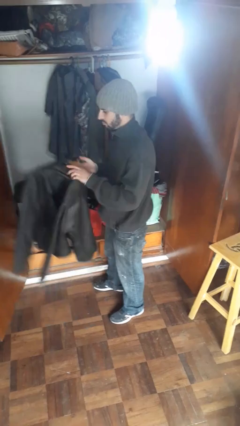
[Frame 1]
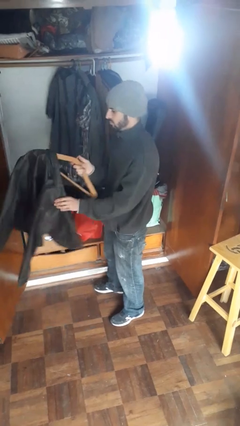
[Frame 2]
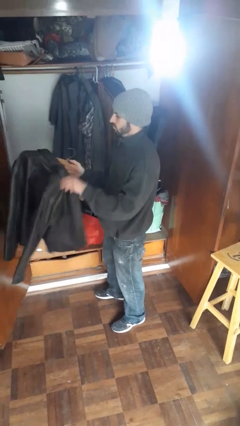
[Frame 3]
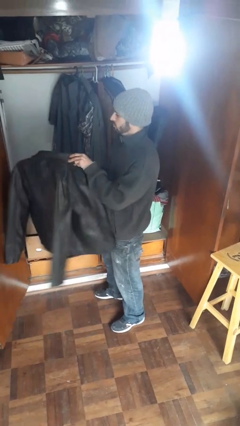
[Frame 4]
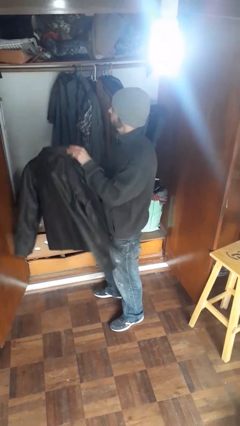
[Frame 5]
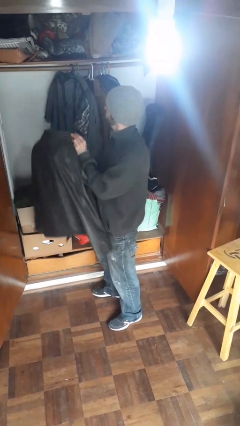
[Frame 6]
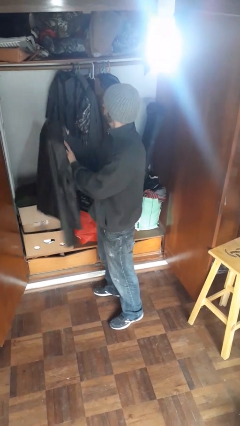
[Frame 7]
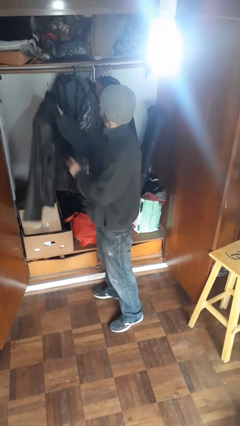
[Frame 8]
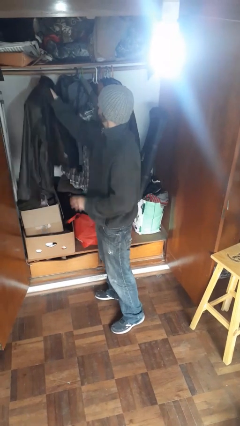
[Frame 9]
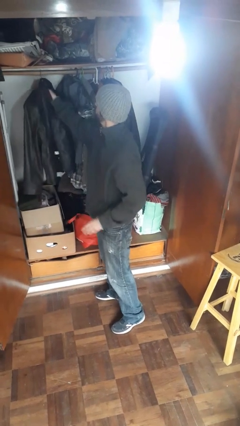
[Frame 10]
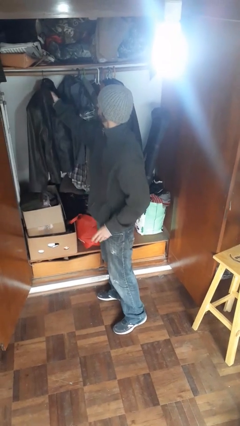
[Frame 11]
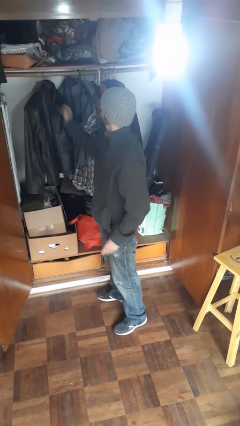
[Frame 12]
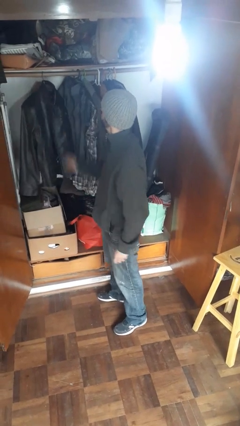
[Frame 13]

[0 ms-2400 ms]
person puts clothes into closet

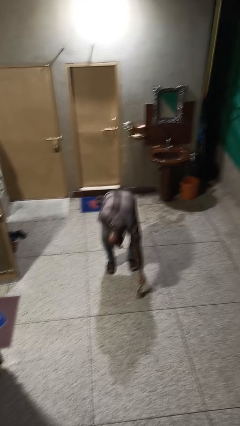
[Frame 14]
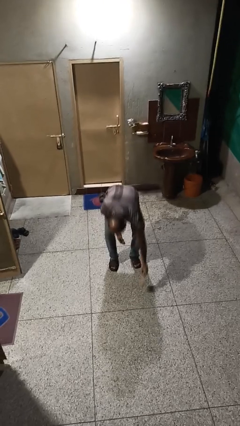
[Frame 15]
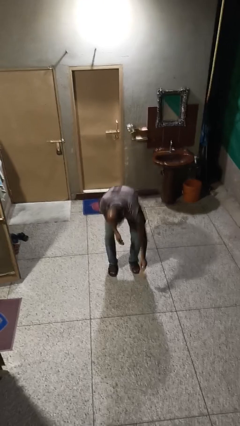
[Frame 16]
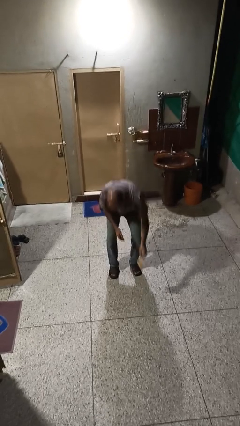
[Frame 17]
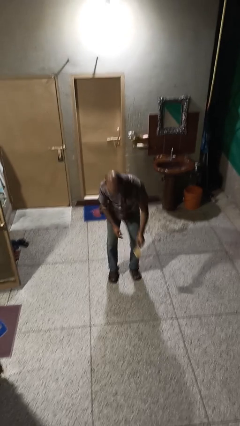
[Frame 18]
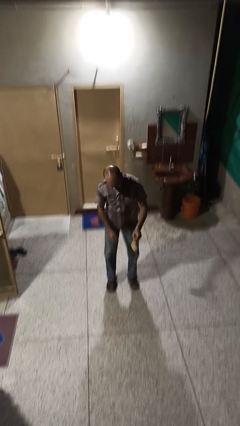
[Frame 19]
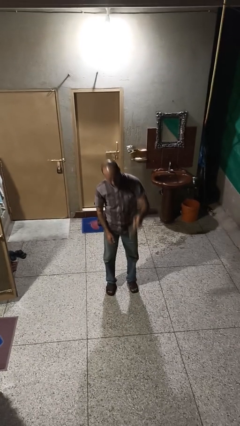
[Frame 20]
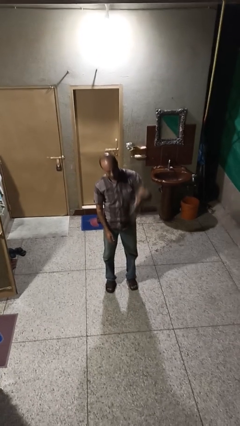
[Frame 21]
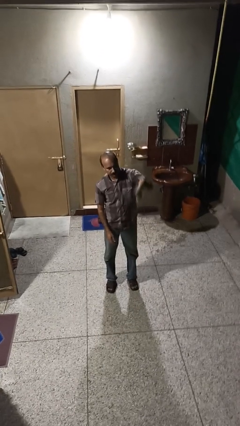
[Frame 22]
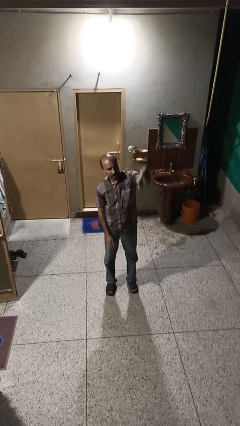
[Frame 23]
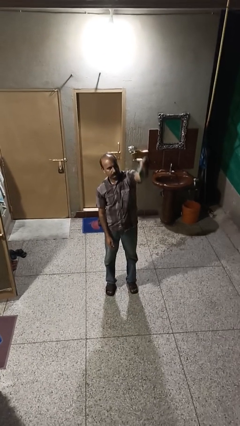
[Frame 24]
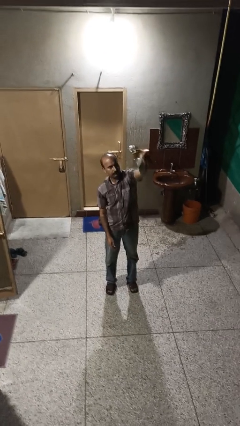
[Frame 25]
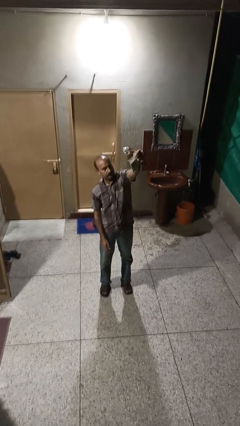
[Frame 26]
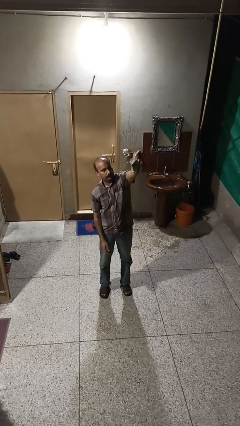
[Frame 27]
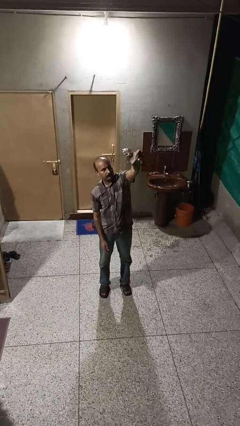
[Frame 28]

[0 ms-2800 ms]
person picks up object from floor

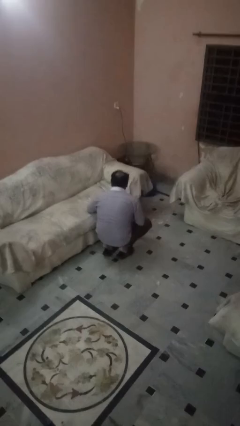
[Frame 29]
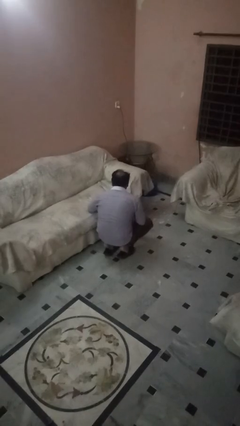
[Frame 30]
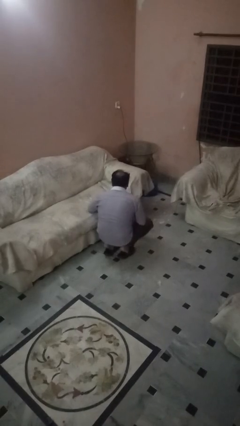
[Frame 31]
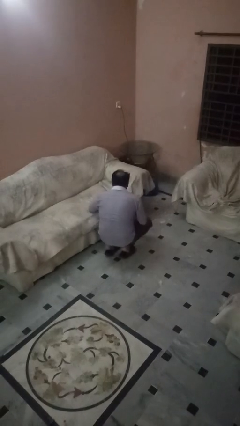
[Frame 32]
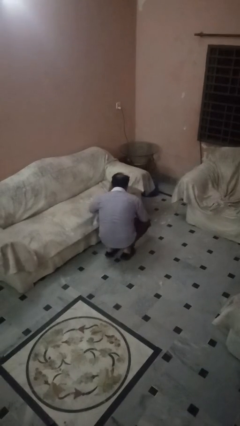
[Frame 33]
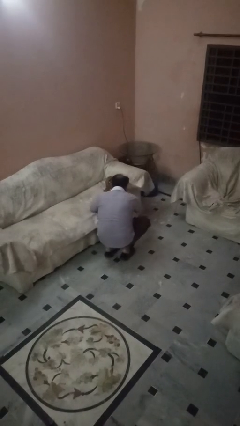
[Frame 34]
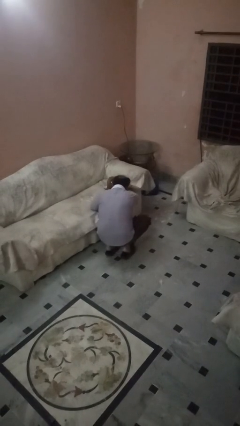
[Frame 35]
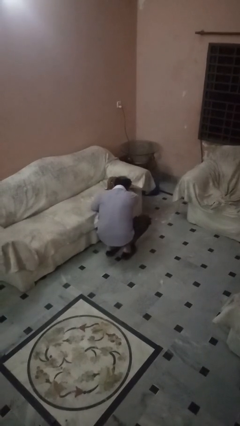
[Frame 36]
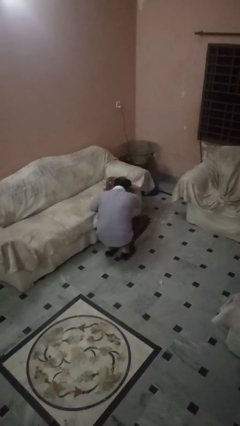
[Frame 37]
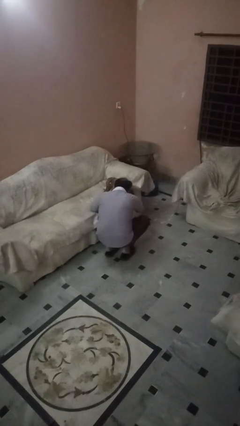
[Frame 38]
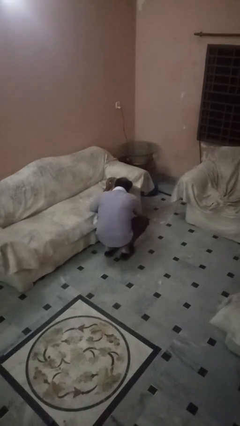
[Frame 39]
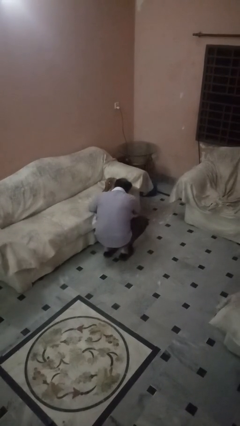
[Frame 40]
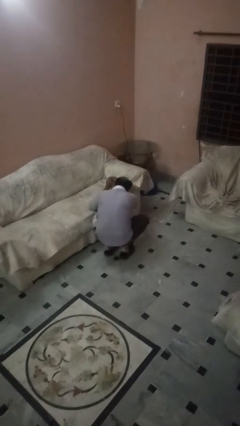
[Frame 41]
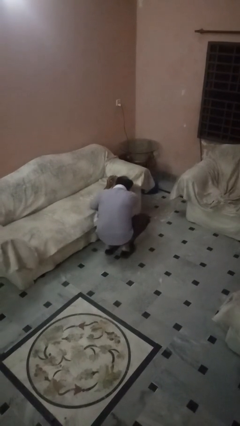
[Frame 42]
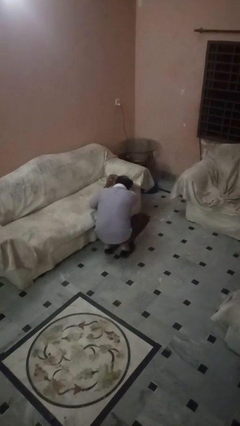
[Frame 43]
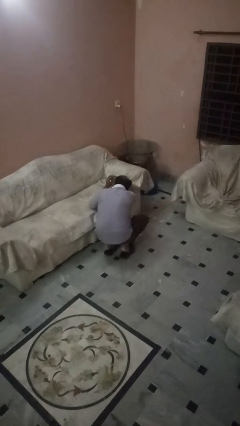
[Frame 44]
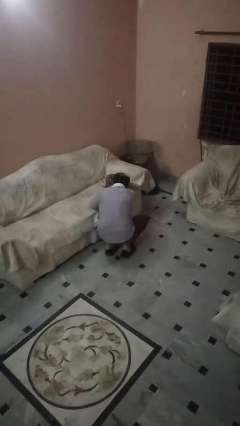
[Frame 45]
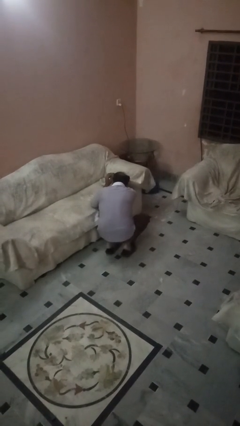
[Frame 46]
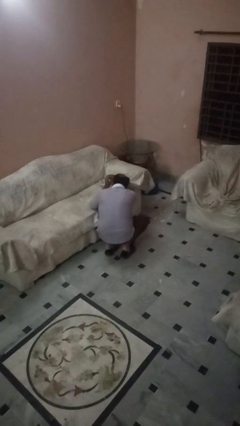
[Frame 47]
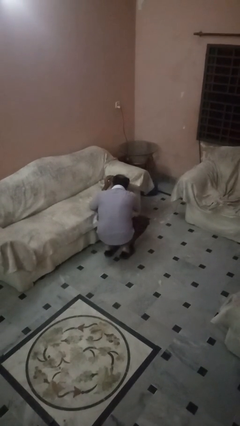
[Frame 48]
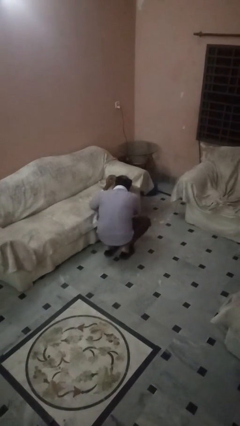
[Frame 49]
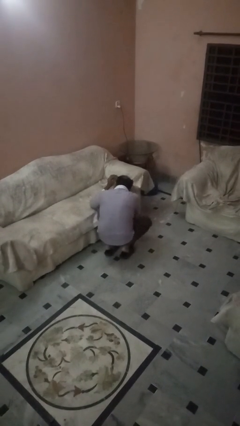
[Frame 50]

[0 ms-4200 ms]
person searches in couch

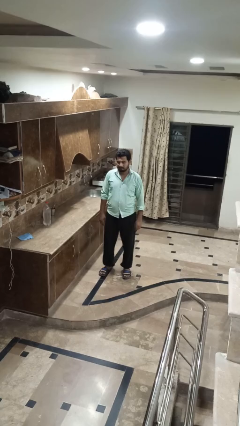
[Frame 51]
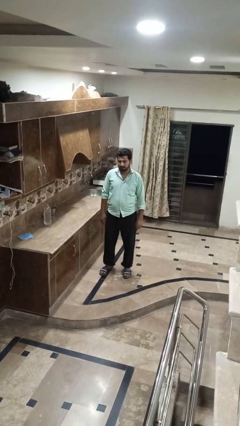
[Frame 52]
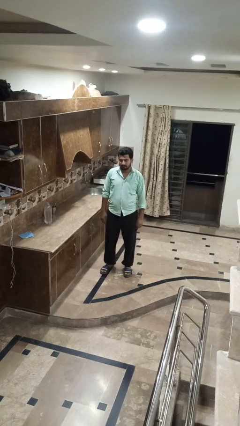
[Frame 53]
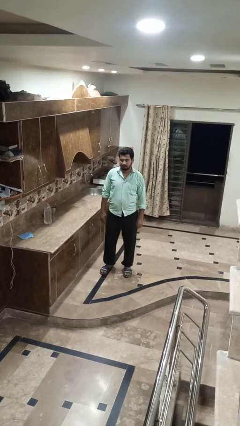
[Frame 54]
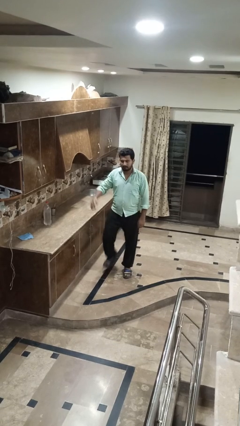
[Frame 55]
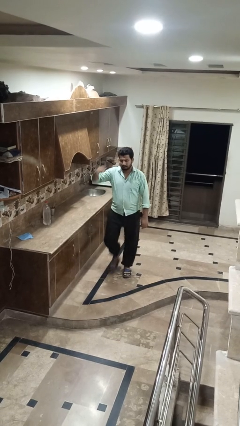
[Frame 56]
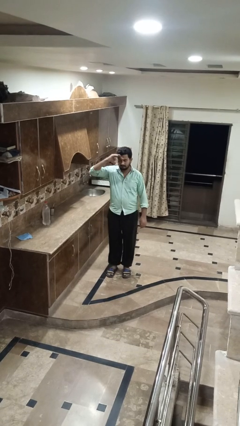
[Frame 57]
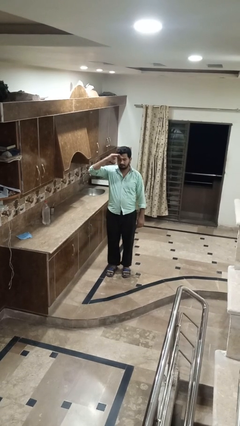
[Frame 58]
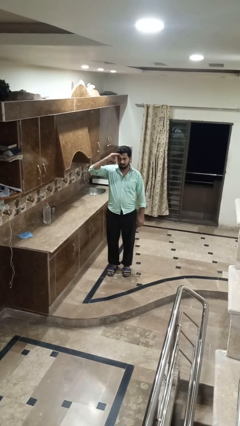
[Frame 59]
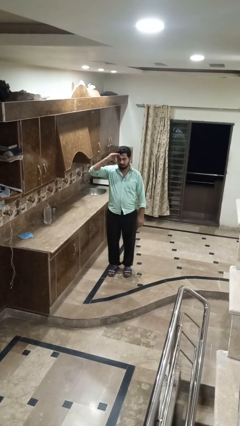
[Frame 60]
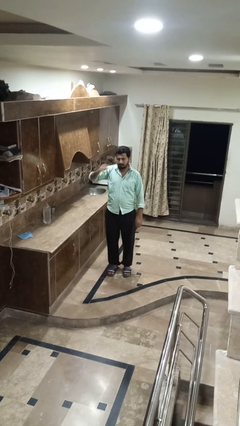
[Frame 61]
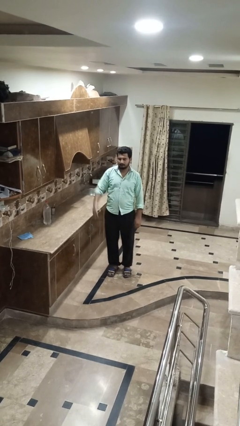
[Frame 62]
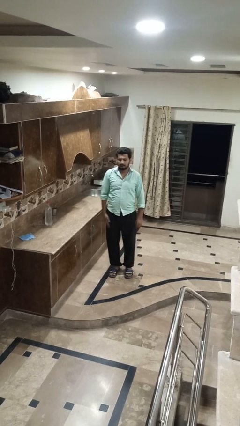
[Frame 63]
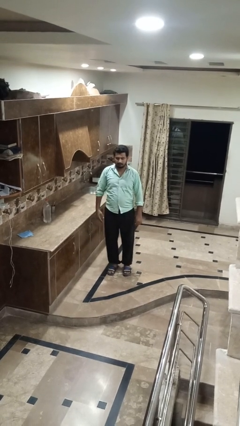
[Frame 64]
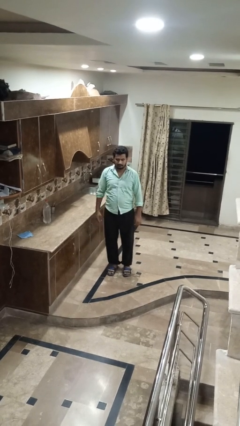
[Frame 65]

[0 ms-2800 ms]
person salutes

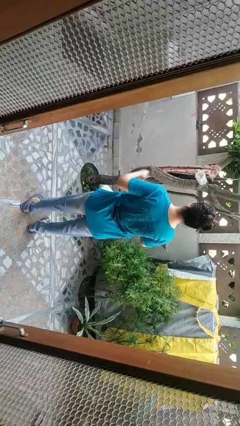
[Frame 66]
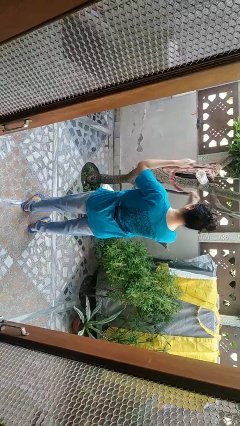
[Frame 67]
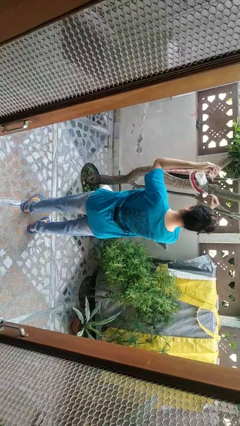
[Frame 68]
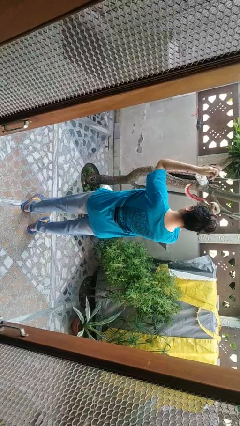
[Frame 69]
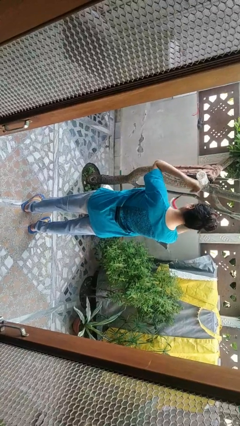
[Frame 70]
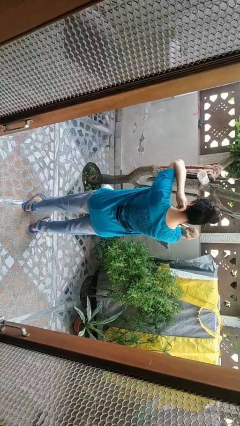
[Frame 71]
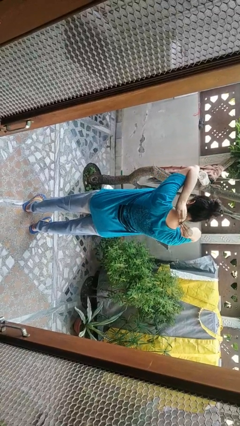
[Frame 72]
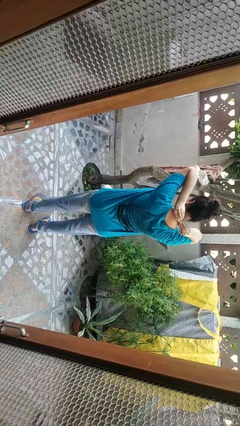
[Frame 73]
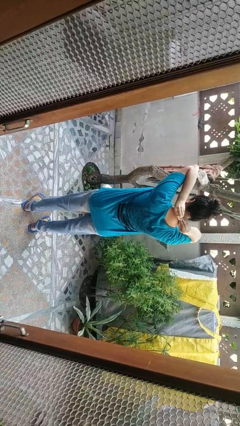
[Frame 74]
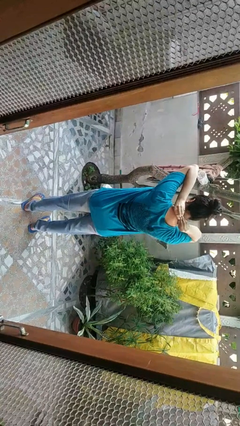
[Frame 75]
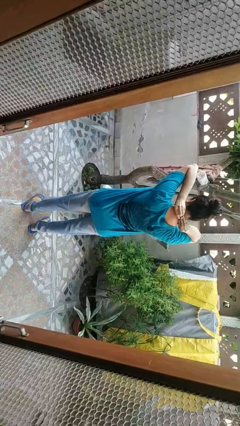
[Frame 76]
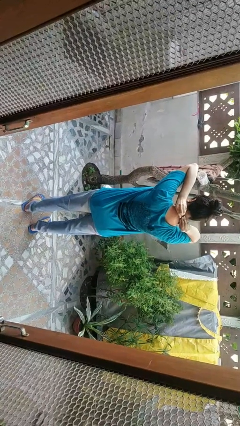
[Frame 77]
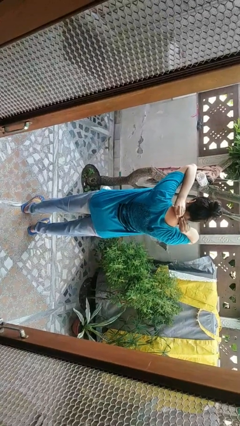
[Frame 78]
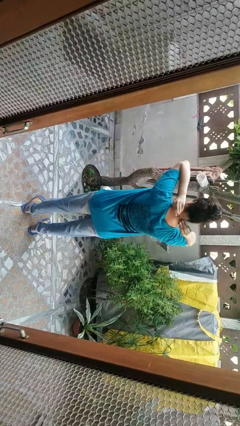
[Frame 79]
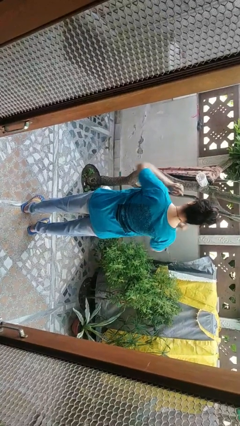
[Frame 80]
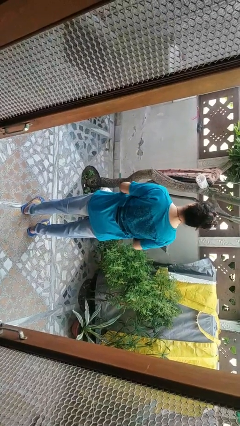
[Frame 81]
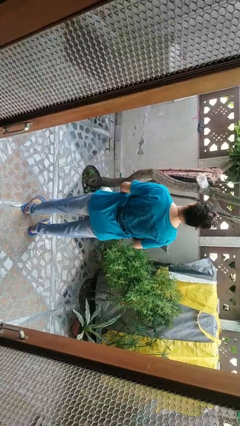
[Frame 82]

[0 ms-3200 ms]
person puts on necklace

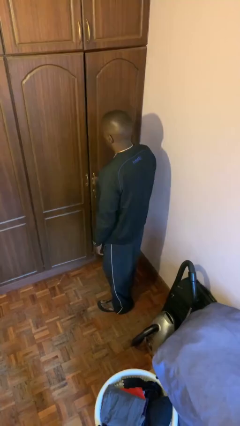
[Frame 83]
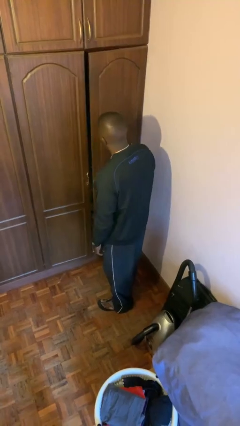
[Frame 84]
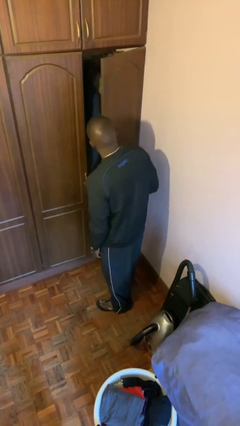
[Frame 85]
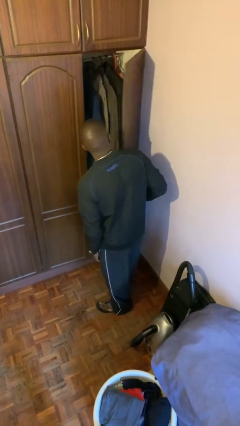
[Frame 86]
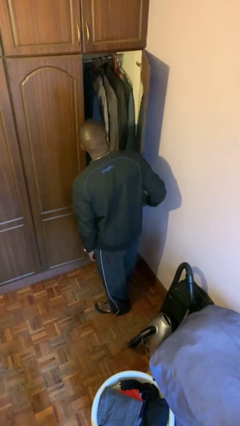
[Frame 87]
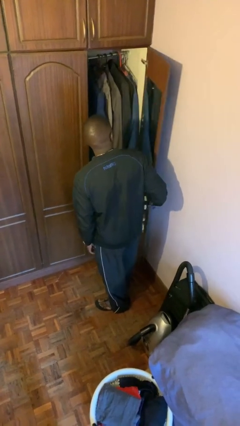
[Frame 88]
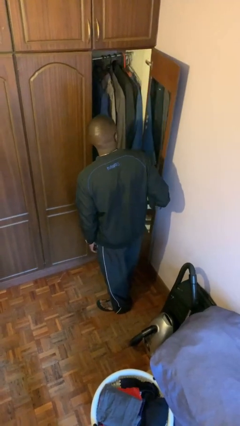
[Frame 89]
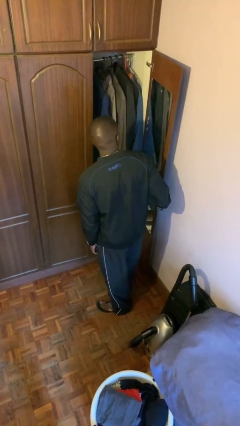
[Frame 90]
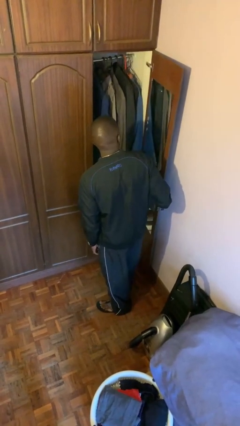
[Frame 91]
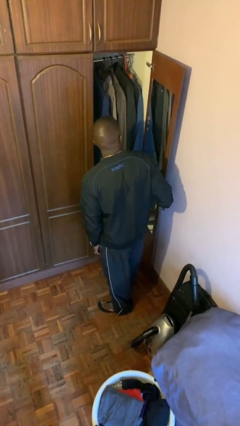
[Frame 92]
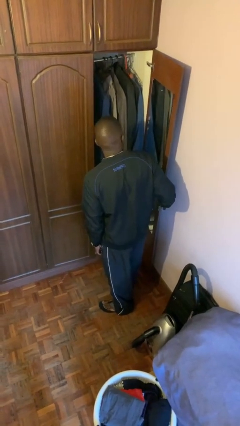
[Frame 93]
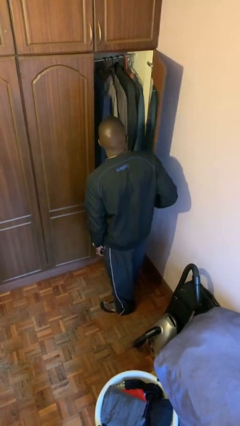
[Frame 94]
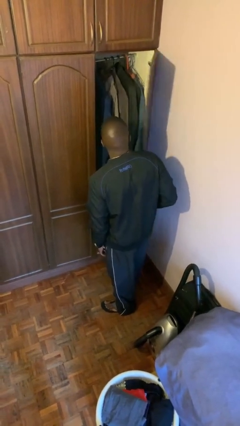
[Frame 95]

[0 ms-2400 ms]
person opens closet door
